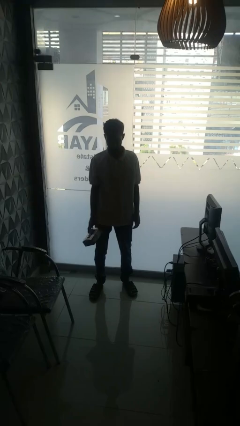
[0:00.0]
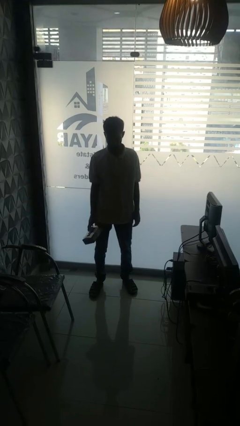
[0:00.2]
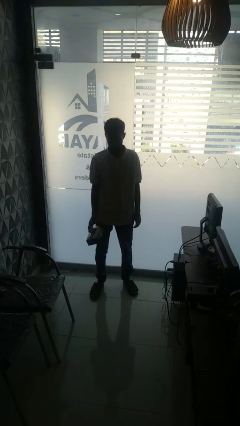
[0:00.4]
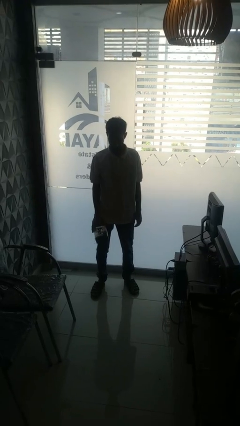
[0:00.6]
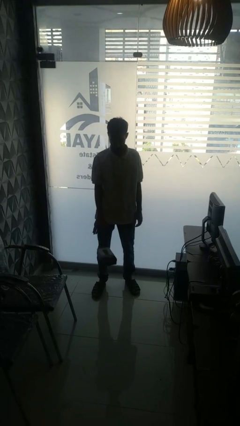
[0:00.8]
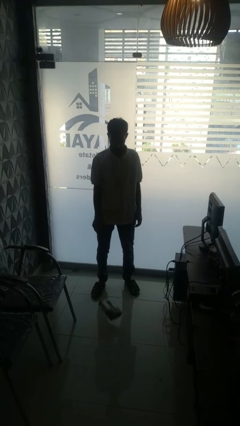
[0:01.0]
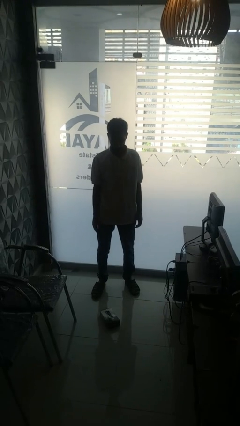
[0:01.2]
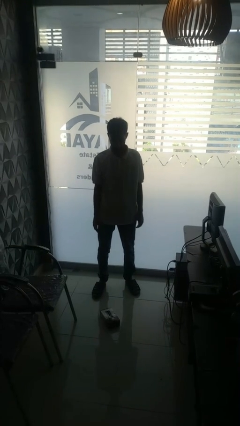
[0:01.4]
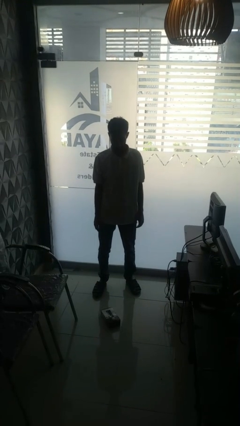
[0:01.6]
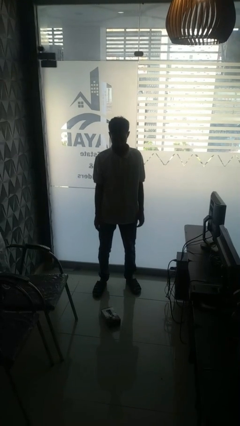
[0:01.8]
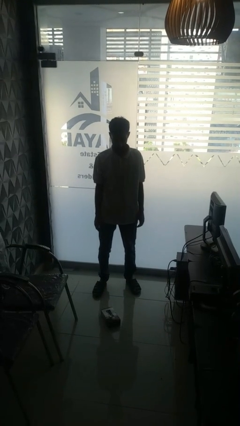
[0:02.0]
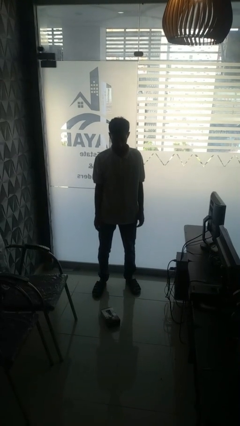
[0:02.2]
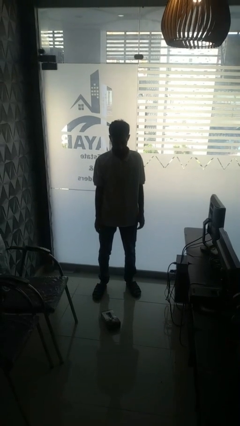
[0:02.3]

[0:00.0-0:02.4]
person throws object to ground

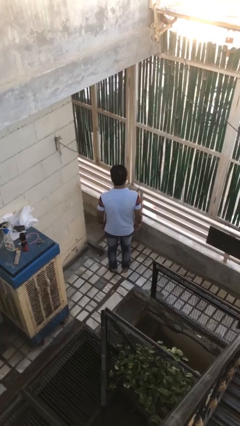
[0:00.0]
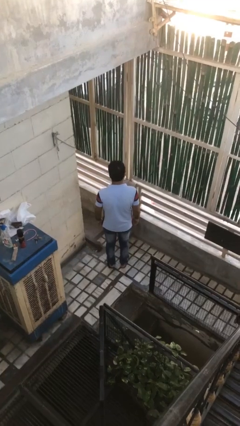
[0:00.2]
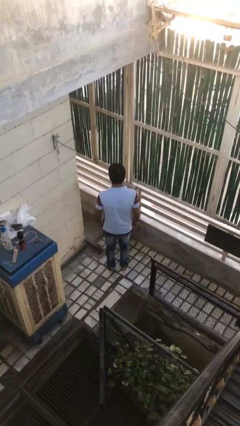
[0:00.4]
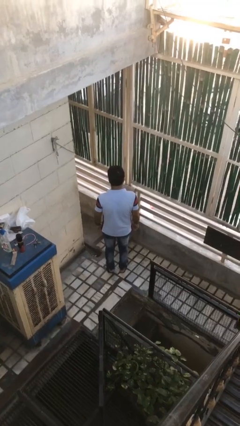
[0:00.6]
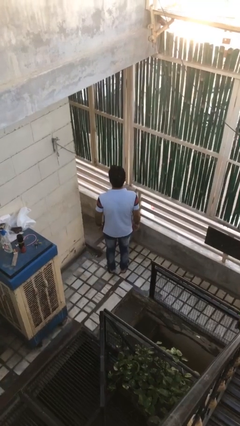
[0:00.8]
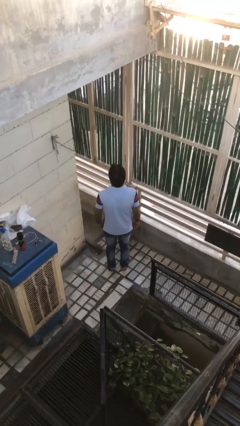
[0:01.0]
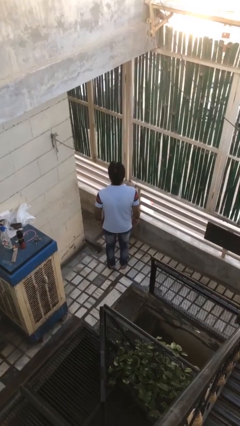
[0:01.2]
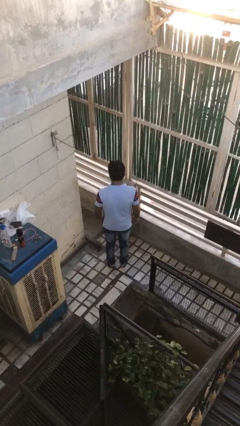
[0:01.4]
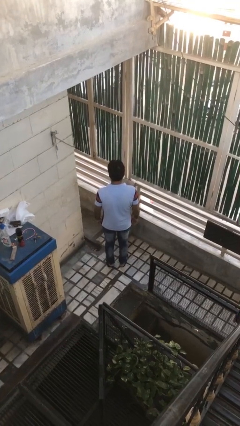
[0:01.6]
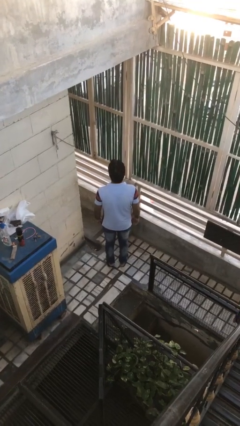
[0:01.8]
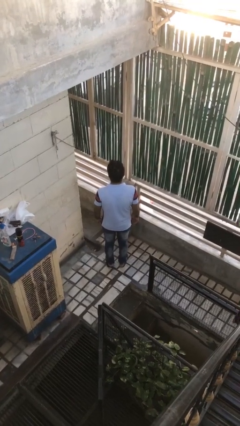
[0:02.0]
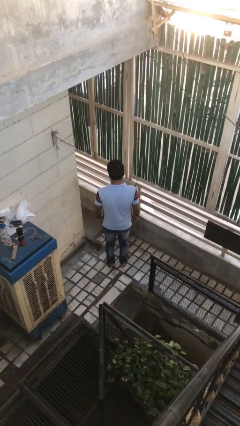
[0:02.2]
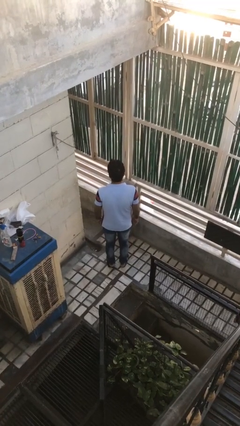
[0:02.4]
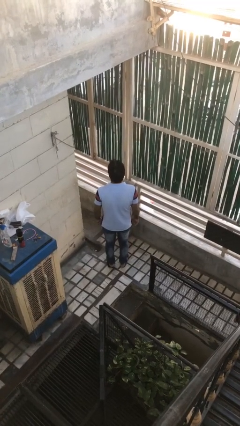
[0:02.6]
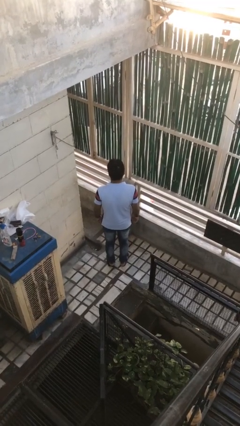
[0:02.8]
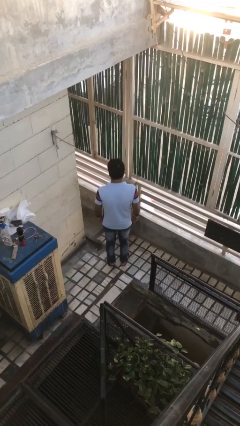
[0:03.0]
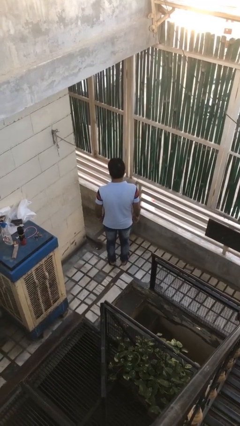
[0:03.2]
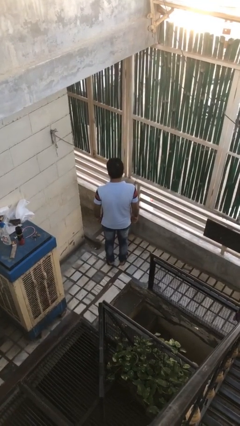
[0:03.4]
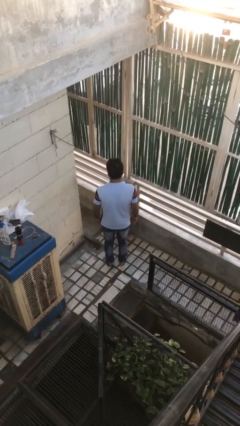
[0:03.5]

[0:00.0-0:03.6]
person nods head

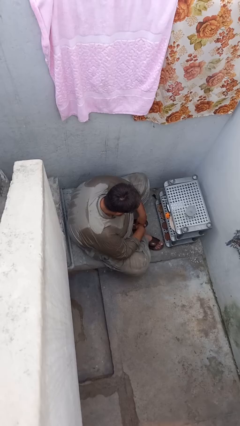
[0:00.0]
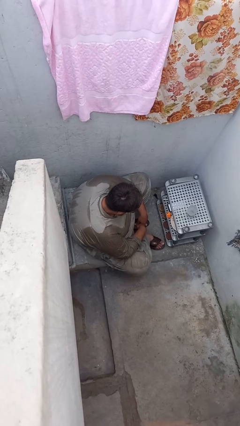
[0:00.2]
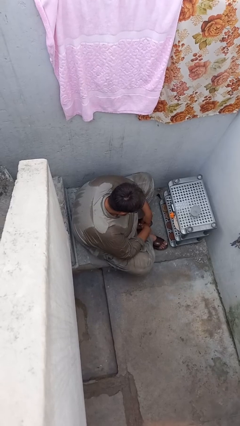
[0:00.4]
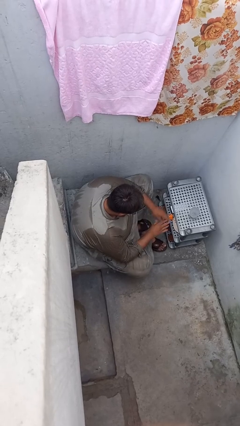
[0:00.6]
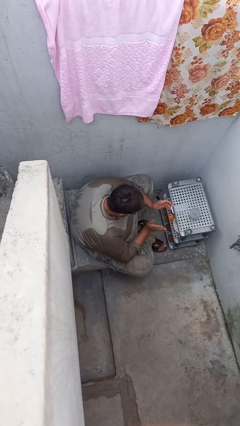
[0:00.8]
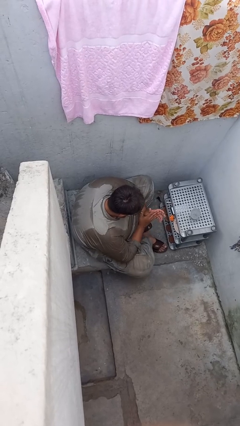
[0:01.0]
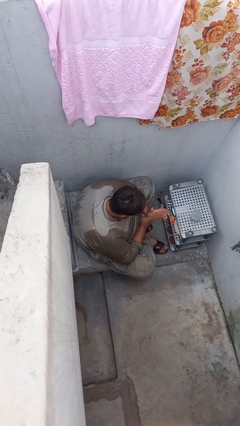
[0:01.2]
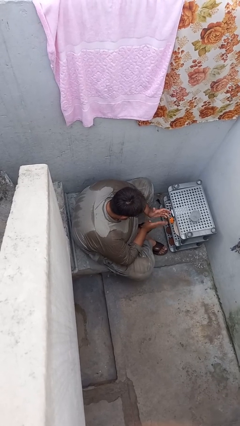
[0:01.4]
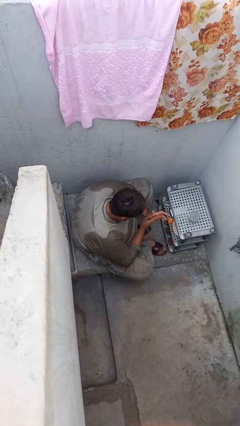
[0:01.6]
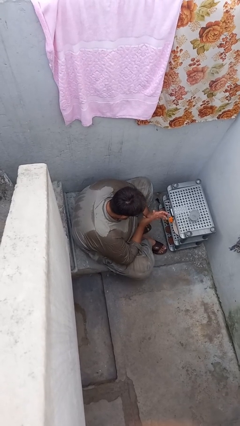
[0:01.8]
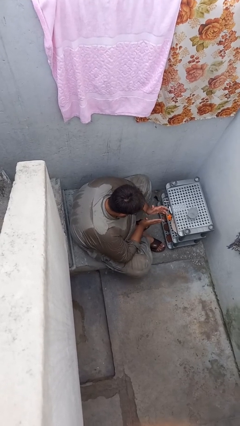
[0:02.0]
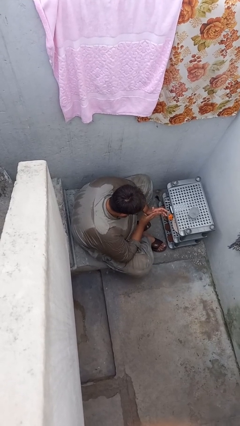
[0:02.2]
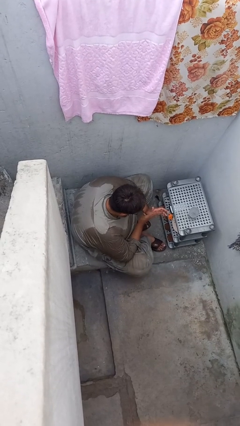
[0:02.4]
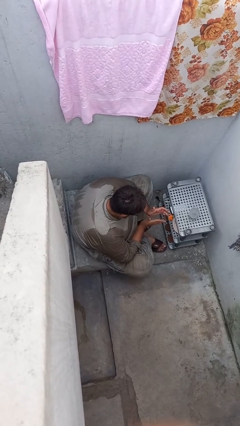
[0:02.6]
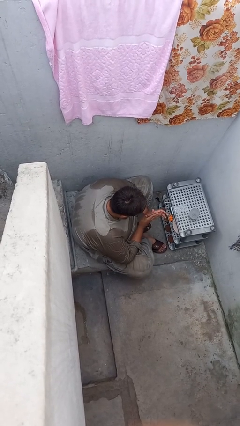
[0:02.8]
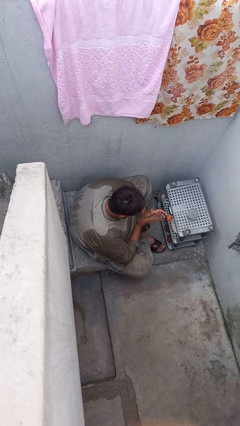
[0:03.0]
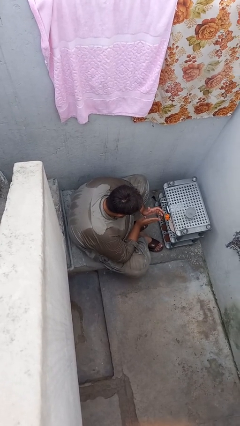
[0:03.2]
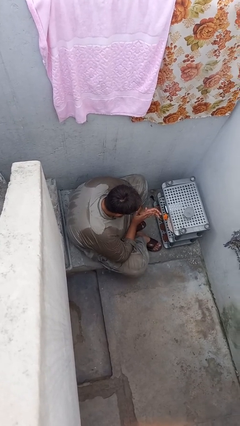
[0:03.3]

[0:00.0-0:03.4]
person claps hands

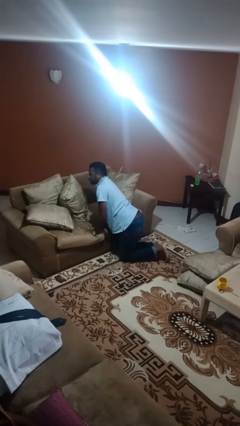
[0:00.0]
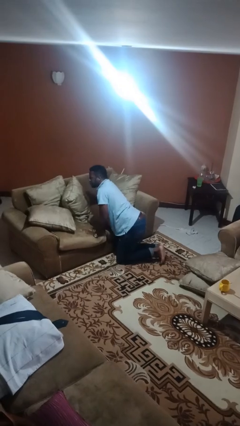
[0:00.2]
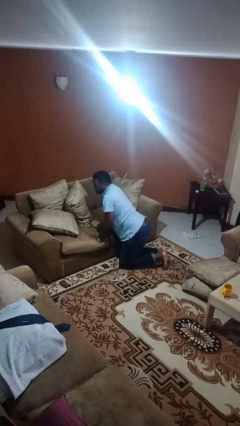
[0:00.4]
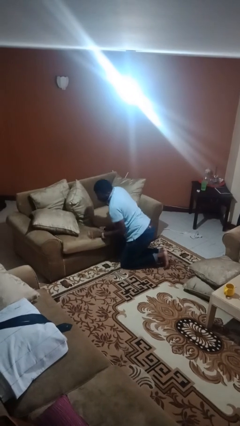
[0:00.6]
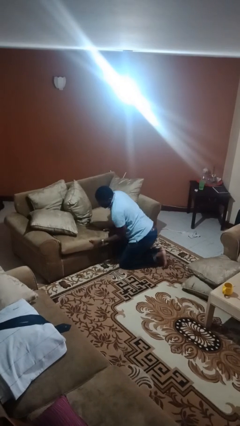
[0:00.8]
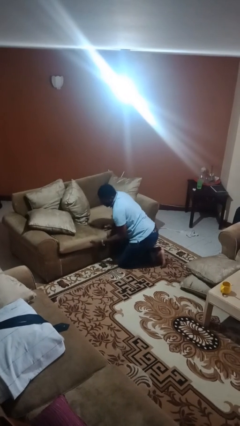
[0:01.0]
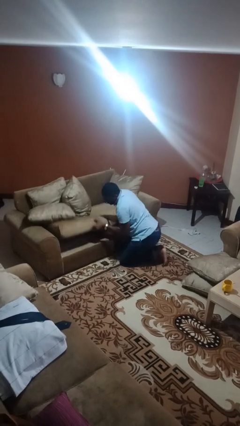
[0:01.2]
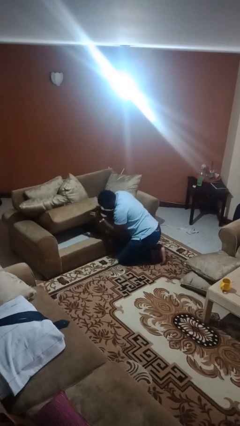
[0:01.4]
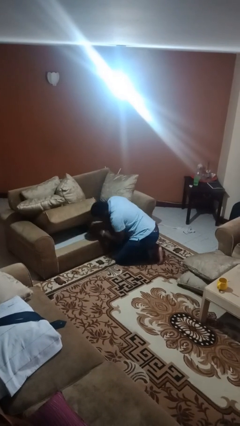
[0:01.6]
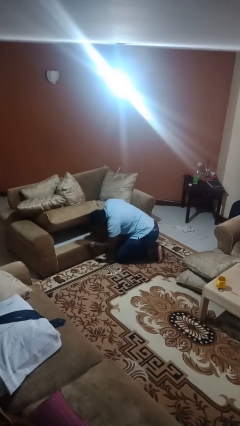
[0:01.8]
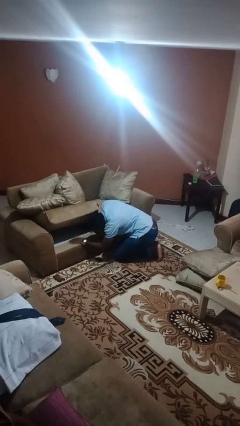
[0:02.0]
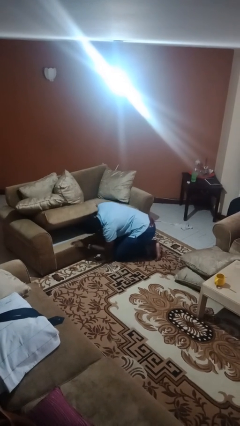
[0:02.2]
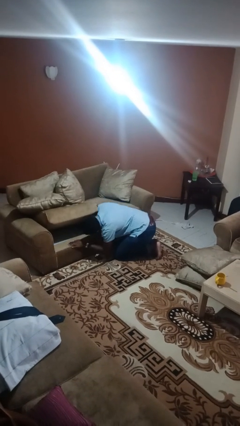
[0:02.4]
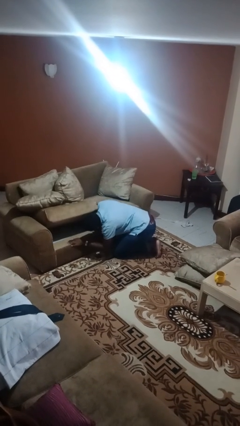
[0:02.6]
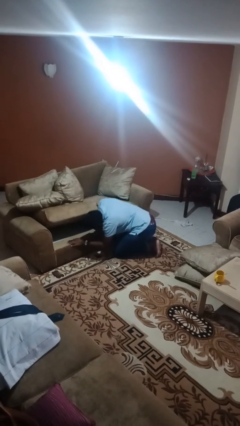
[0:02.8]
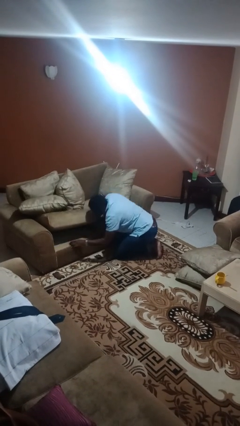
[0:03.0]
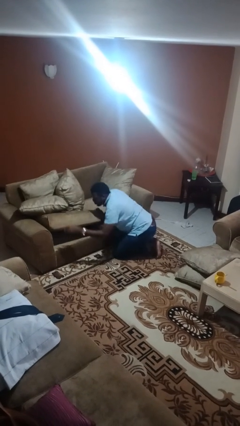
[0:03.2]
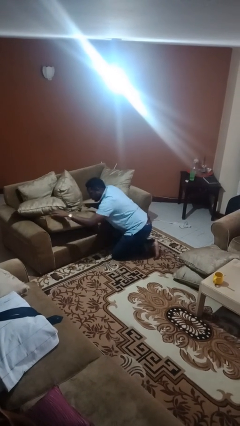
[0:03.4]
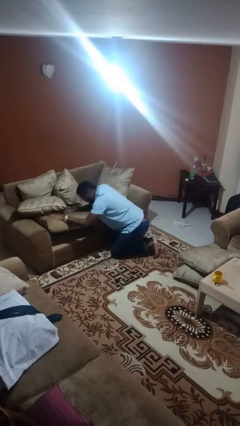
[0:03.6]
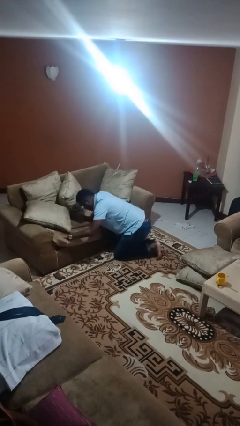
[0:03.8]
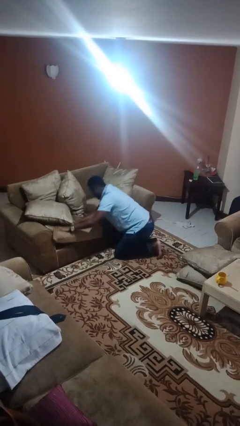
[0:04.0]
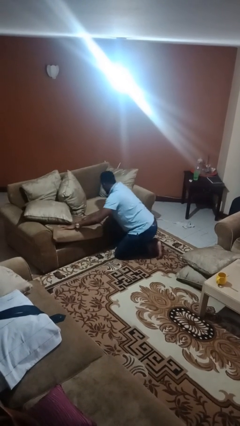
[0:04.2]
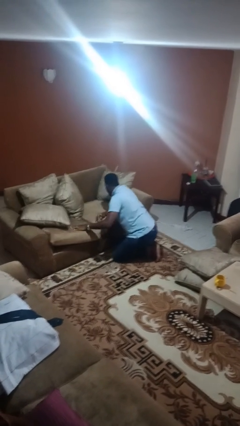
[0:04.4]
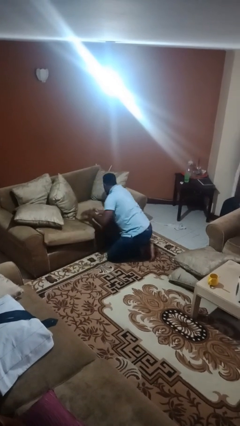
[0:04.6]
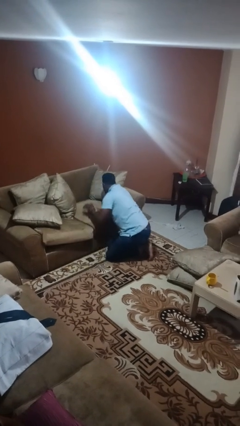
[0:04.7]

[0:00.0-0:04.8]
person searches under couch

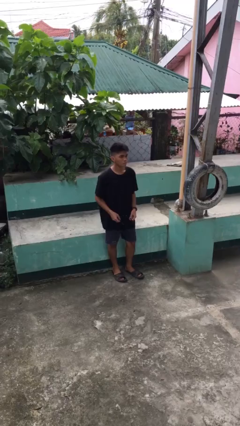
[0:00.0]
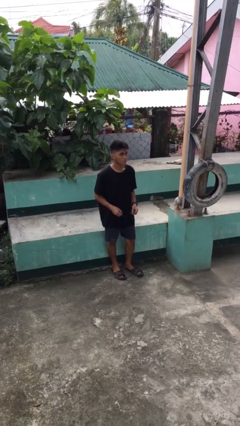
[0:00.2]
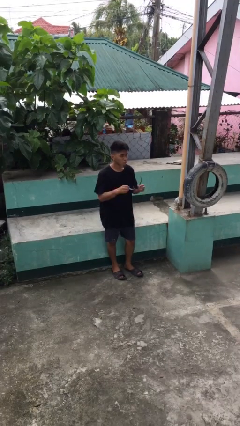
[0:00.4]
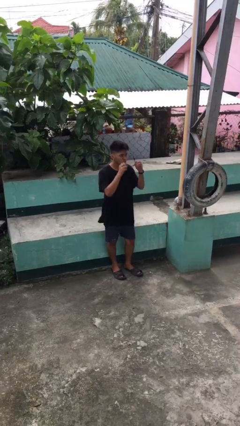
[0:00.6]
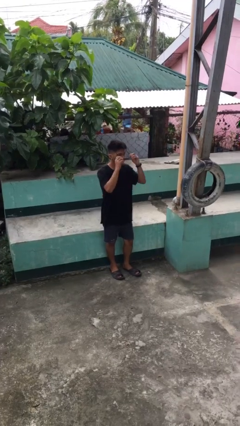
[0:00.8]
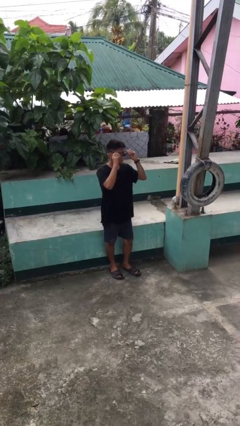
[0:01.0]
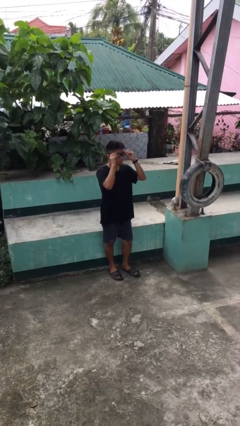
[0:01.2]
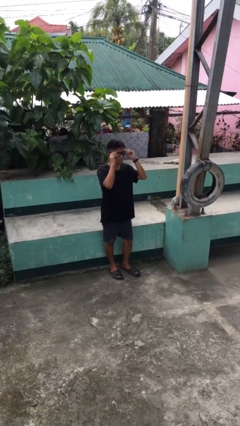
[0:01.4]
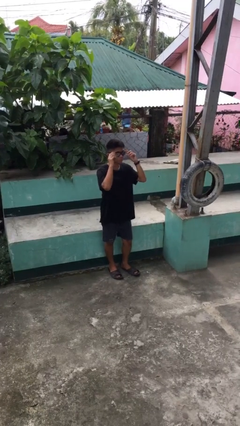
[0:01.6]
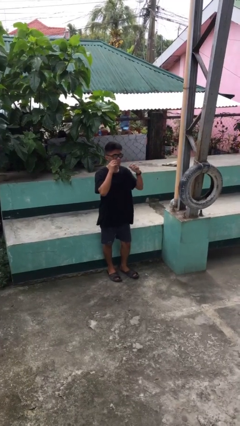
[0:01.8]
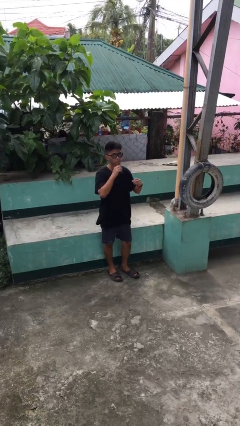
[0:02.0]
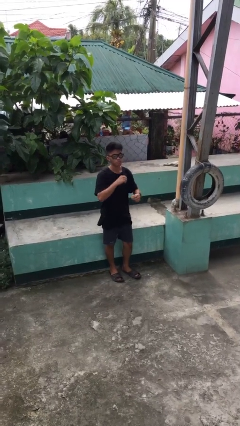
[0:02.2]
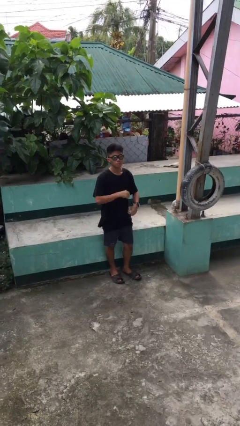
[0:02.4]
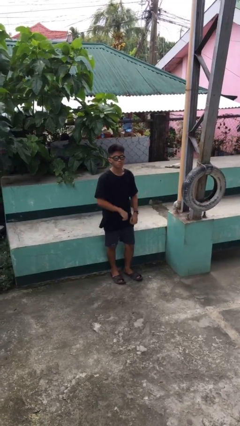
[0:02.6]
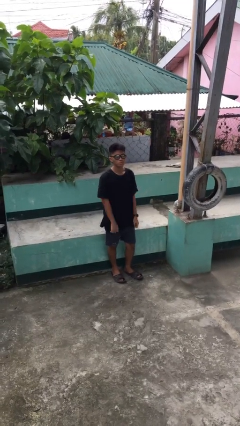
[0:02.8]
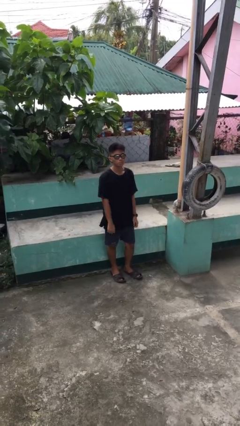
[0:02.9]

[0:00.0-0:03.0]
person puts on sunglasses
